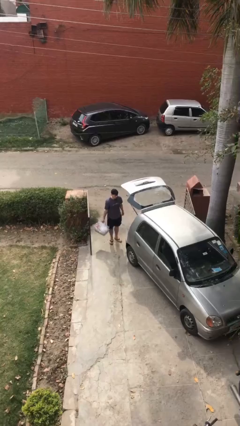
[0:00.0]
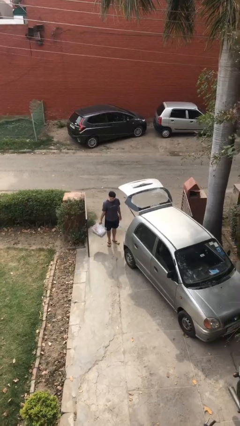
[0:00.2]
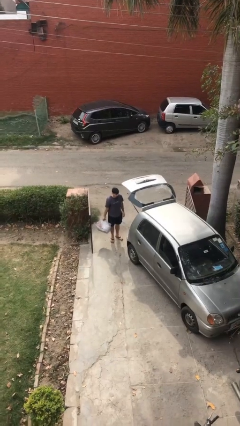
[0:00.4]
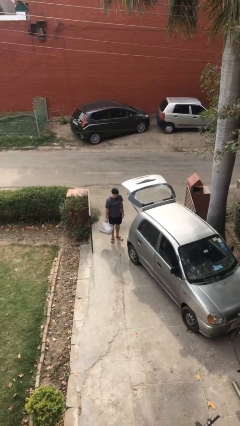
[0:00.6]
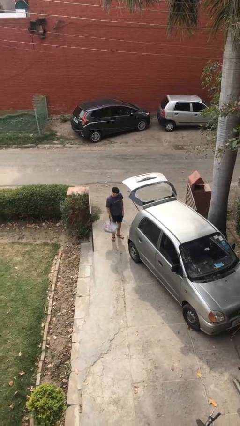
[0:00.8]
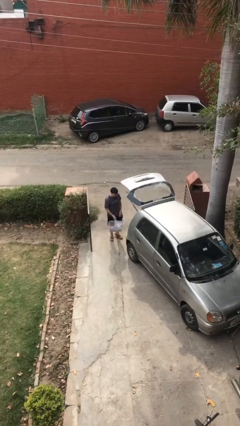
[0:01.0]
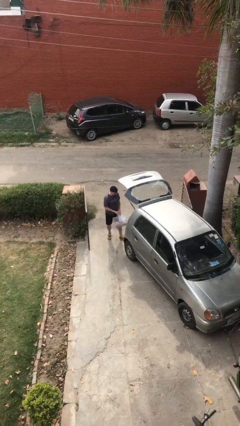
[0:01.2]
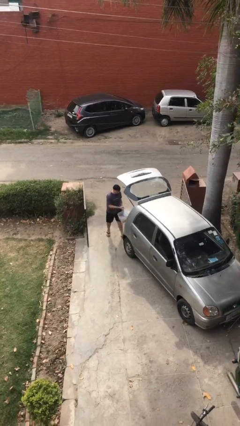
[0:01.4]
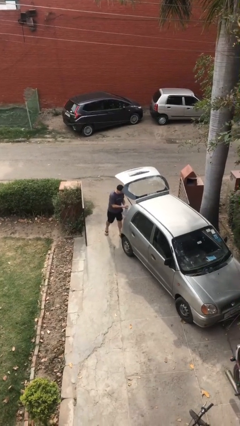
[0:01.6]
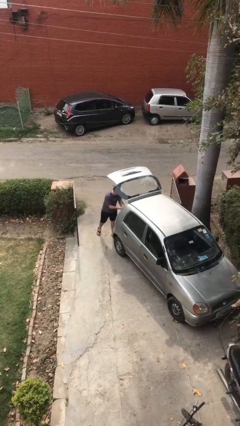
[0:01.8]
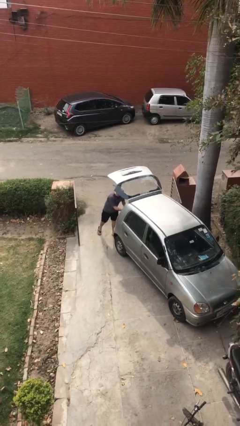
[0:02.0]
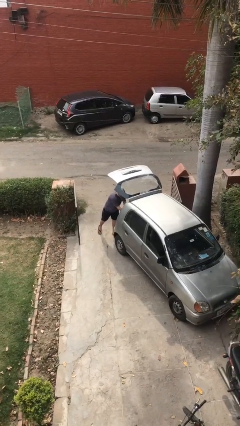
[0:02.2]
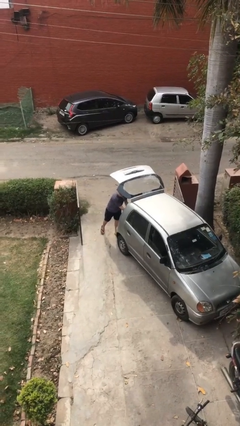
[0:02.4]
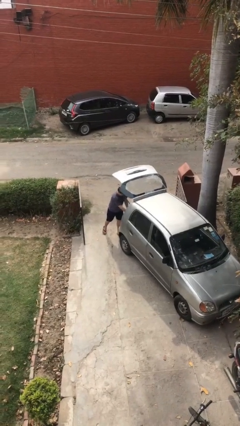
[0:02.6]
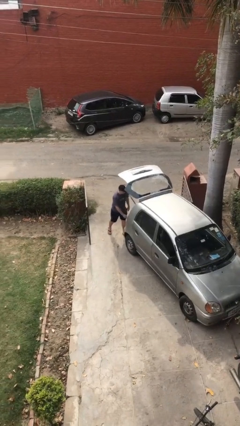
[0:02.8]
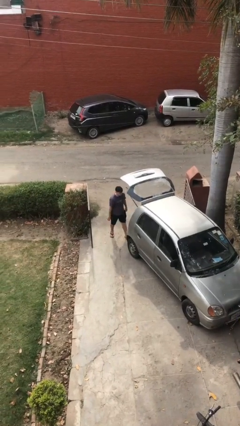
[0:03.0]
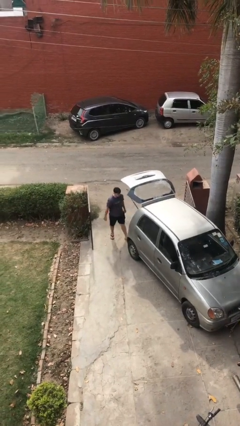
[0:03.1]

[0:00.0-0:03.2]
person loads car

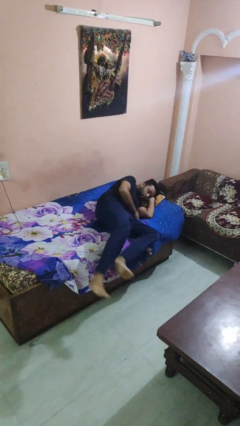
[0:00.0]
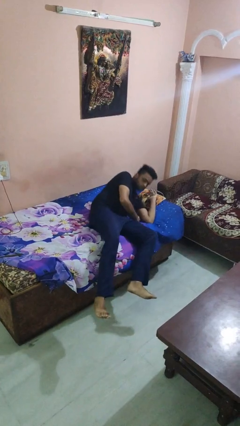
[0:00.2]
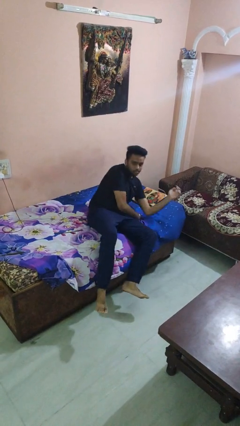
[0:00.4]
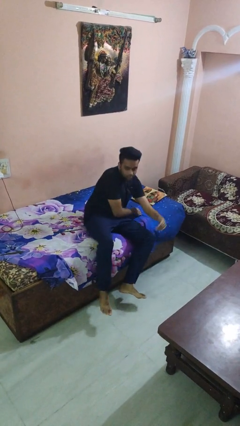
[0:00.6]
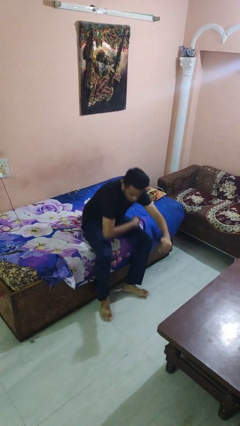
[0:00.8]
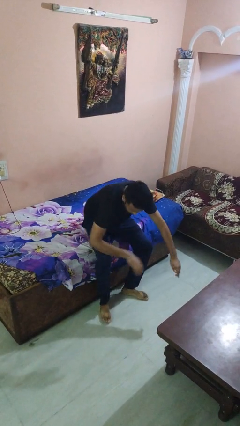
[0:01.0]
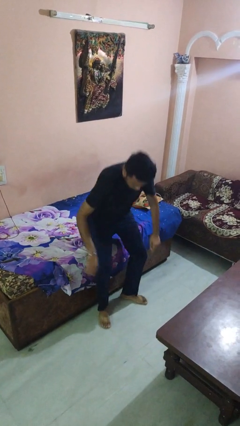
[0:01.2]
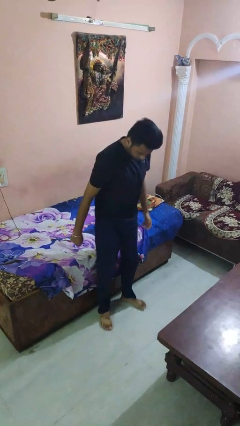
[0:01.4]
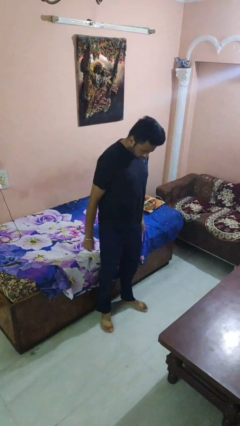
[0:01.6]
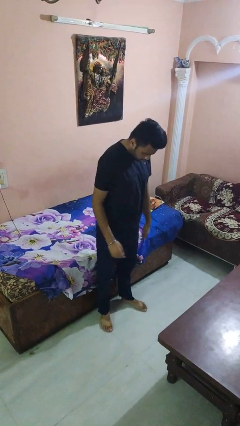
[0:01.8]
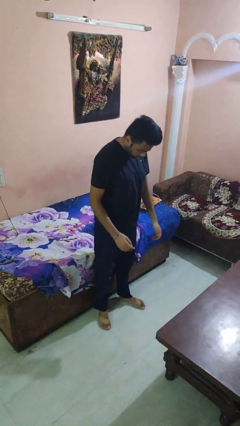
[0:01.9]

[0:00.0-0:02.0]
person stands up

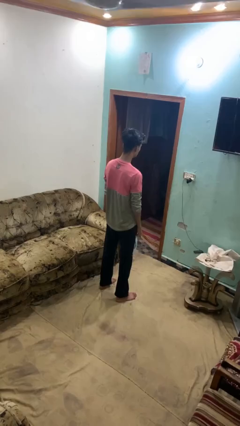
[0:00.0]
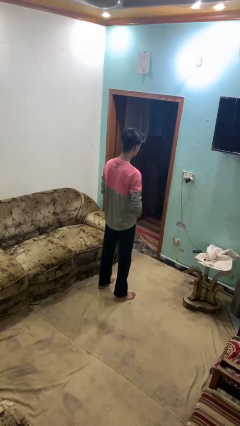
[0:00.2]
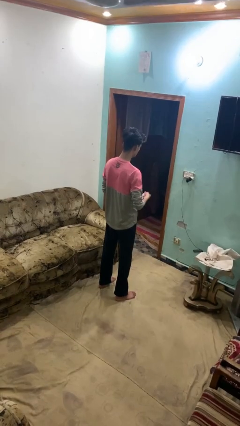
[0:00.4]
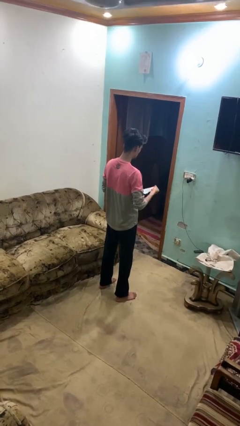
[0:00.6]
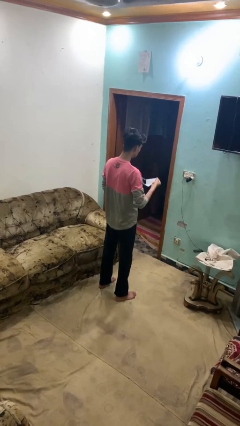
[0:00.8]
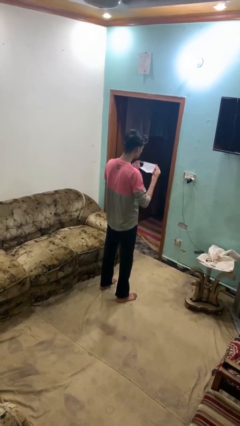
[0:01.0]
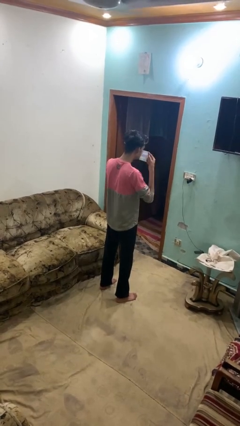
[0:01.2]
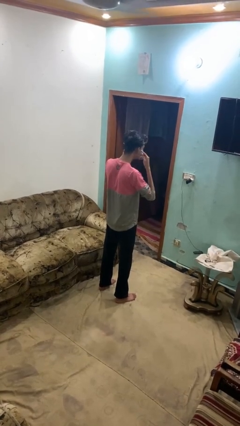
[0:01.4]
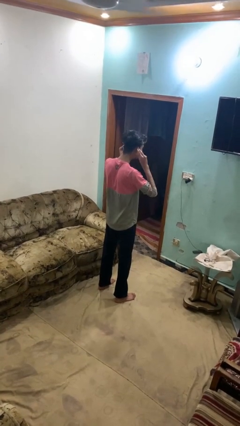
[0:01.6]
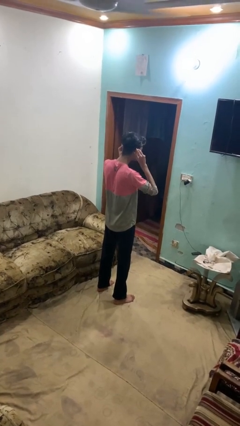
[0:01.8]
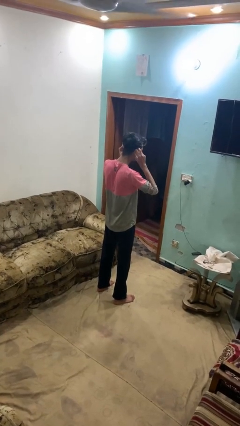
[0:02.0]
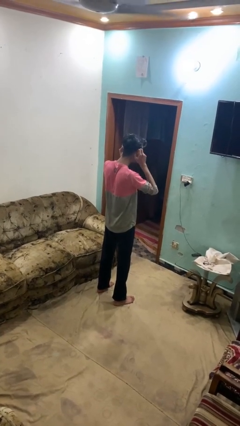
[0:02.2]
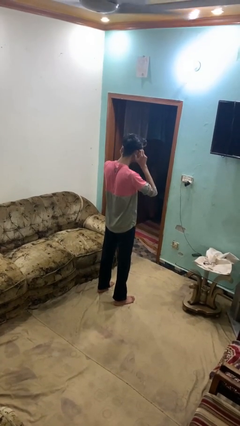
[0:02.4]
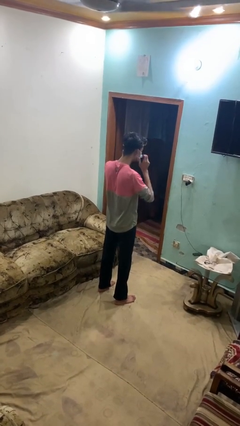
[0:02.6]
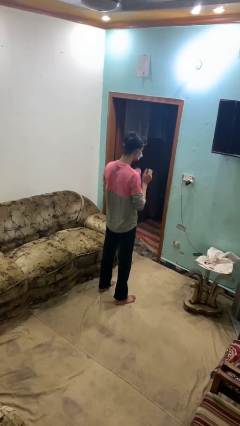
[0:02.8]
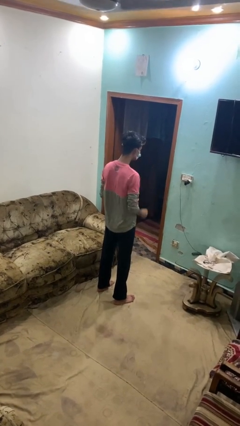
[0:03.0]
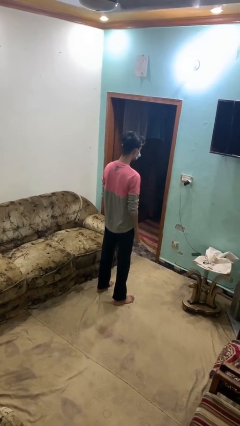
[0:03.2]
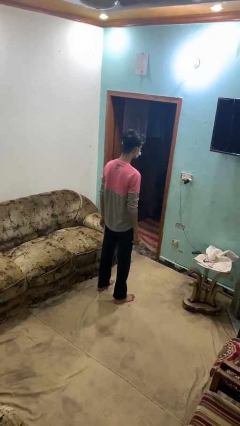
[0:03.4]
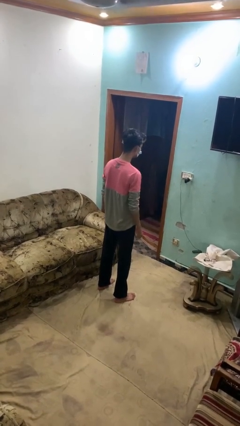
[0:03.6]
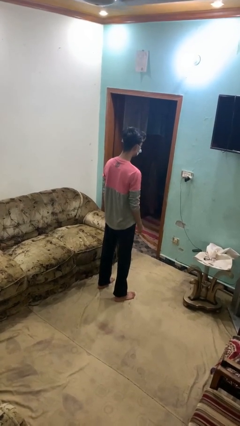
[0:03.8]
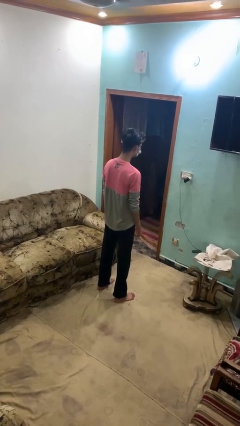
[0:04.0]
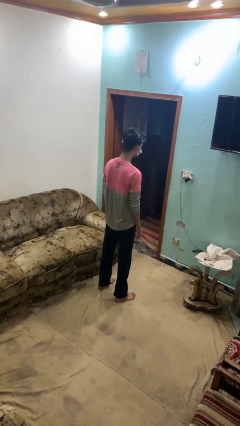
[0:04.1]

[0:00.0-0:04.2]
person puts on facemask

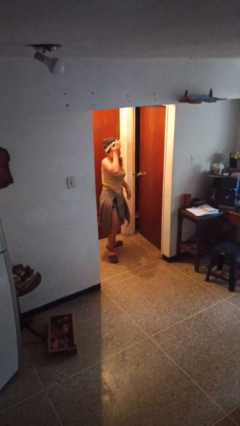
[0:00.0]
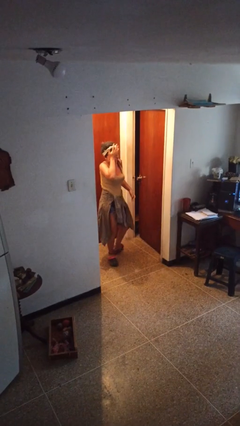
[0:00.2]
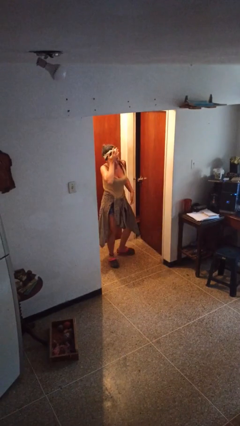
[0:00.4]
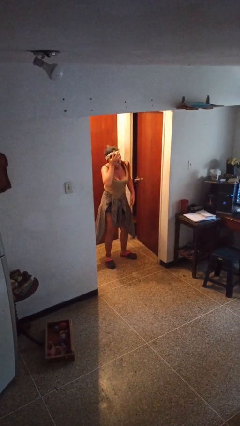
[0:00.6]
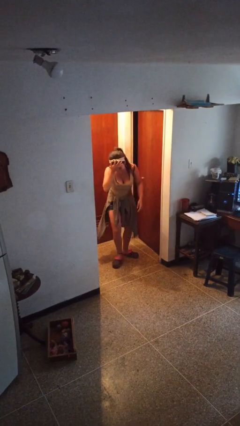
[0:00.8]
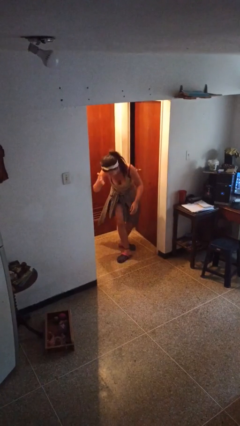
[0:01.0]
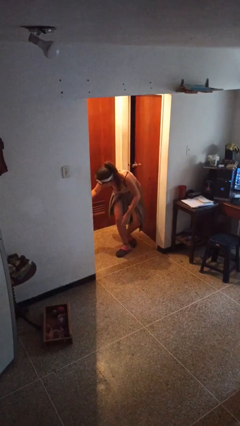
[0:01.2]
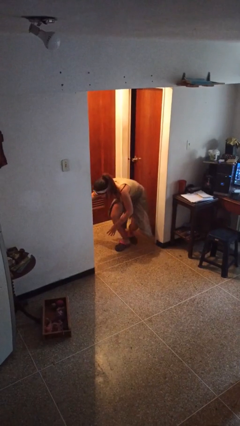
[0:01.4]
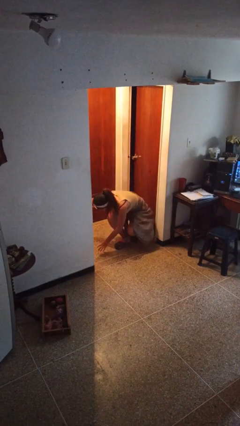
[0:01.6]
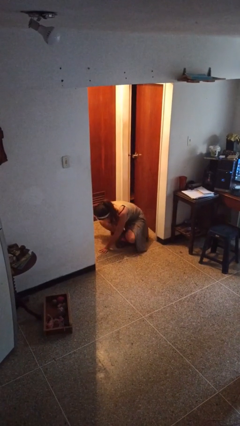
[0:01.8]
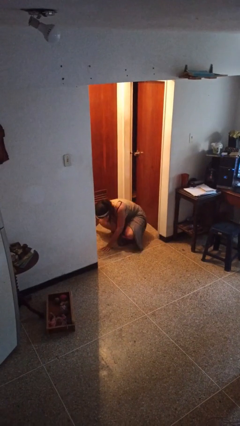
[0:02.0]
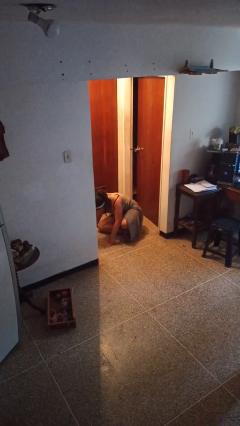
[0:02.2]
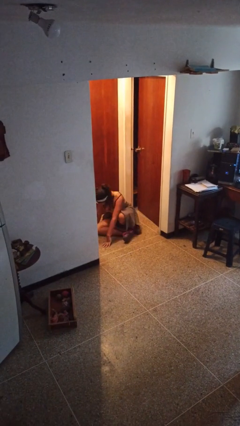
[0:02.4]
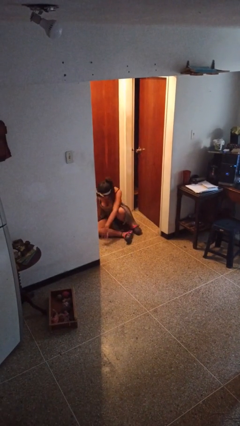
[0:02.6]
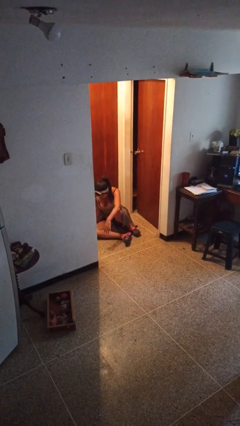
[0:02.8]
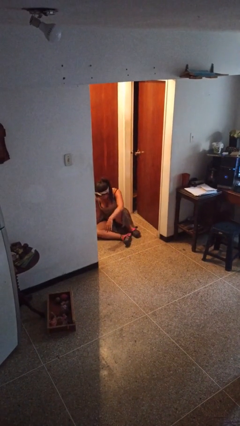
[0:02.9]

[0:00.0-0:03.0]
person sits down

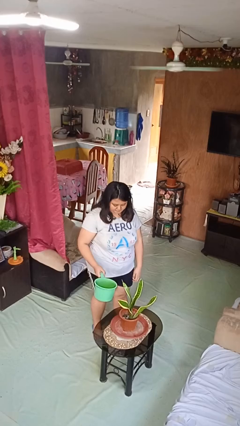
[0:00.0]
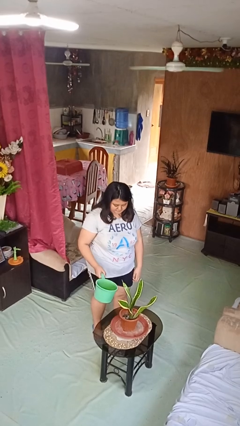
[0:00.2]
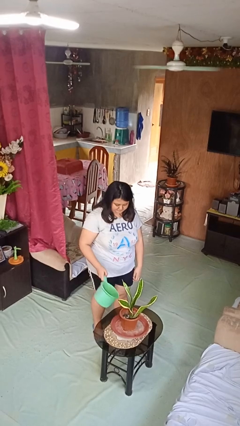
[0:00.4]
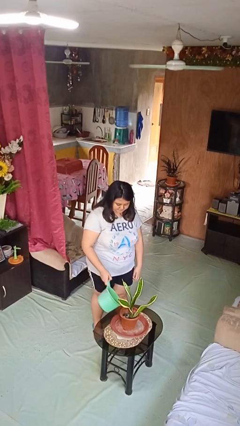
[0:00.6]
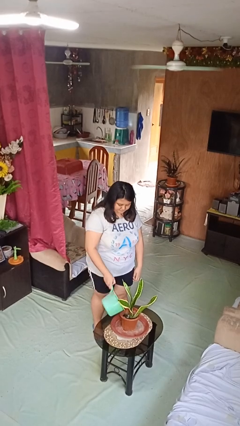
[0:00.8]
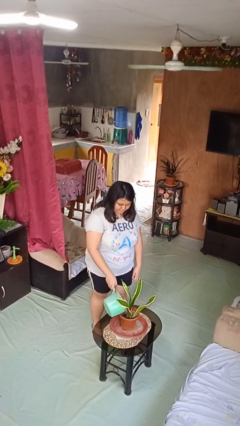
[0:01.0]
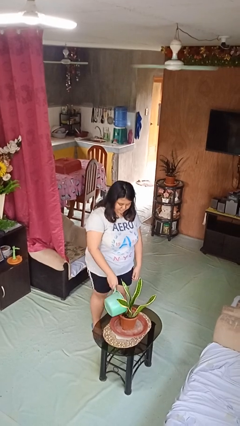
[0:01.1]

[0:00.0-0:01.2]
person waters houseplant

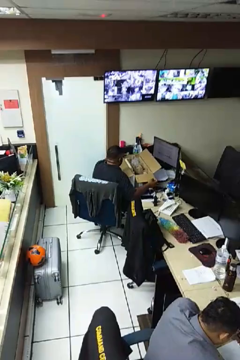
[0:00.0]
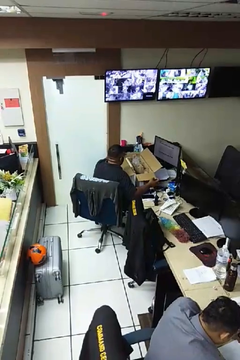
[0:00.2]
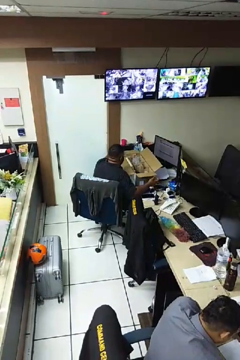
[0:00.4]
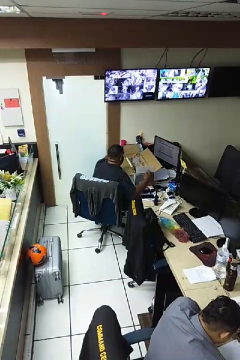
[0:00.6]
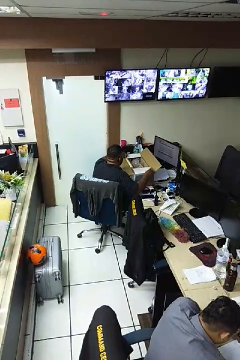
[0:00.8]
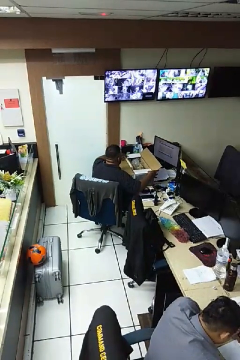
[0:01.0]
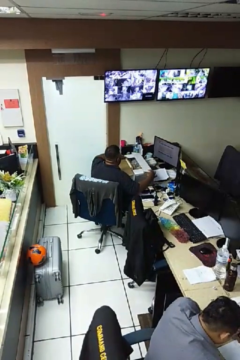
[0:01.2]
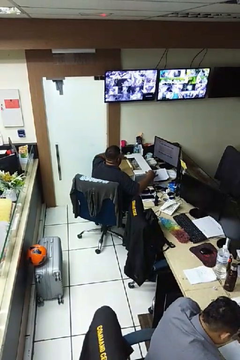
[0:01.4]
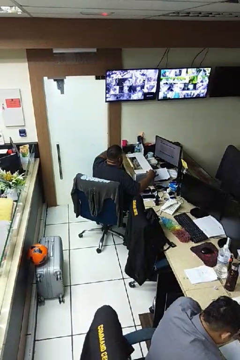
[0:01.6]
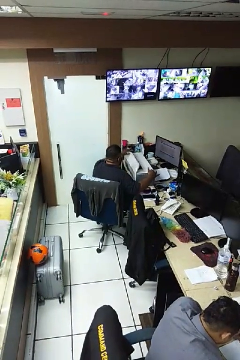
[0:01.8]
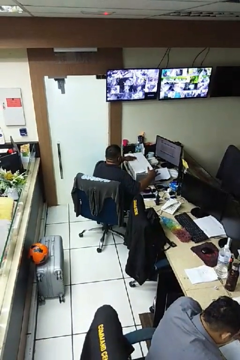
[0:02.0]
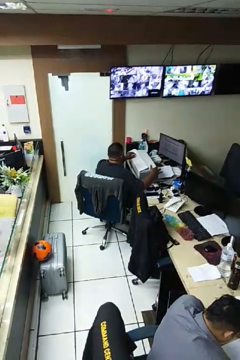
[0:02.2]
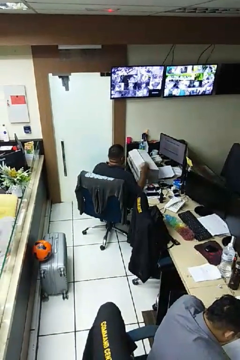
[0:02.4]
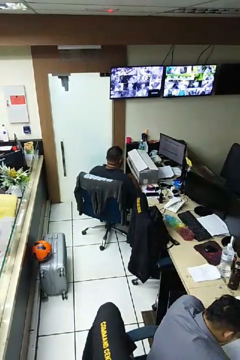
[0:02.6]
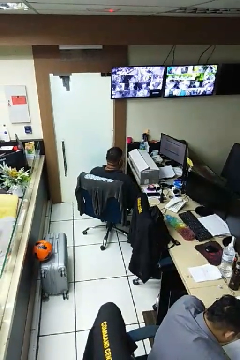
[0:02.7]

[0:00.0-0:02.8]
person closes box

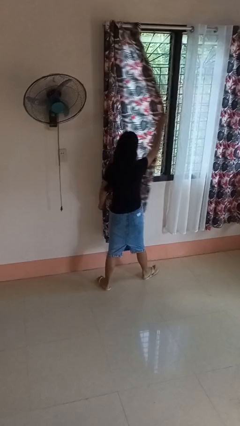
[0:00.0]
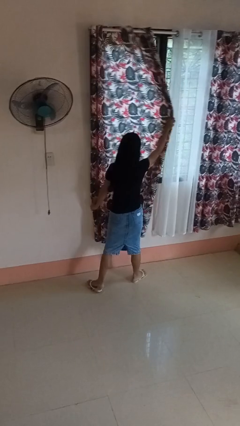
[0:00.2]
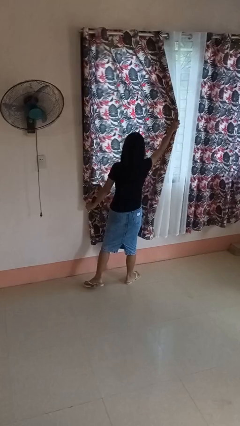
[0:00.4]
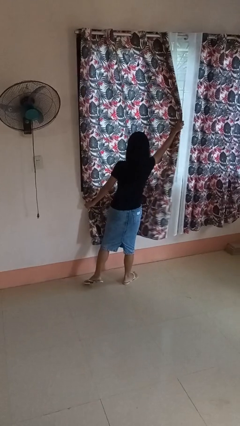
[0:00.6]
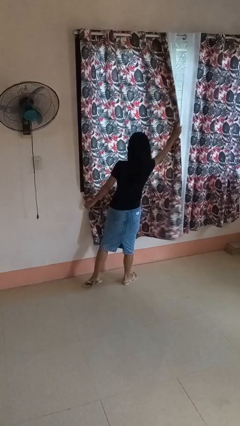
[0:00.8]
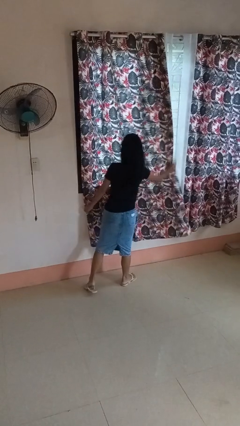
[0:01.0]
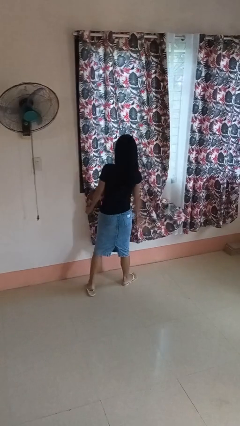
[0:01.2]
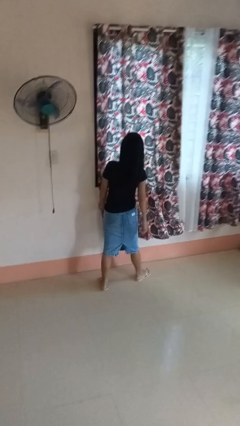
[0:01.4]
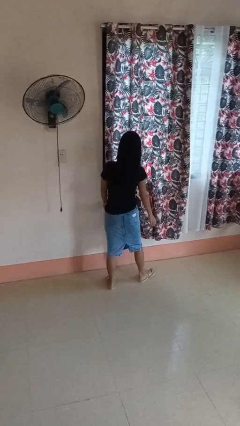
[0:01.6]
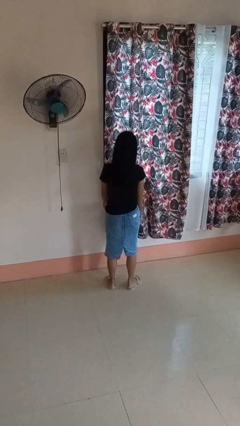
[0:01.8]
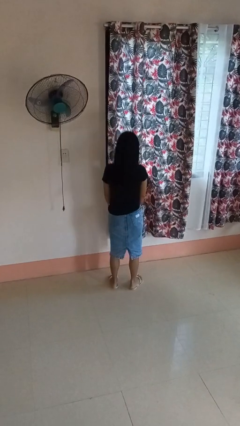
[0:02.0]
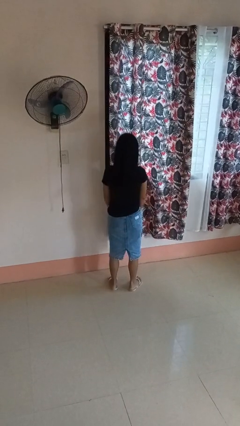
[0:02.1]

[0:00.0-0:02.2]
person closes curtains
